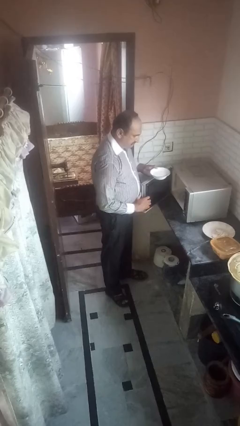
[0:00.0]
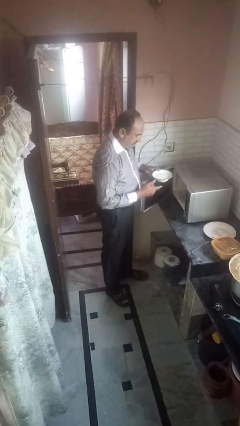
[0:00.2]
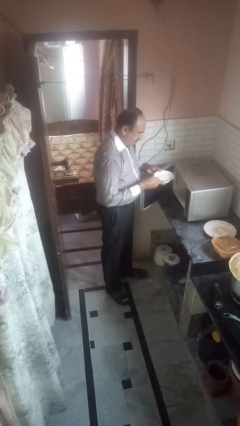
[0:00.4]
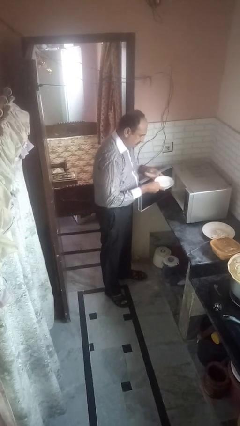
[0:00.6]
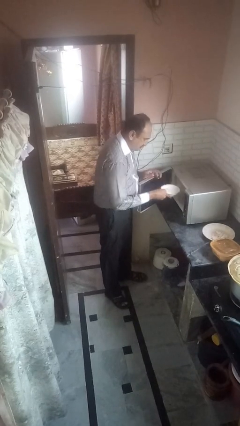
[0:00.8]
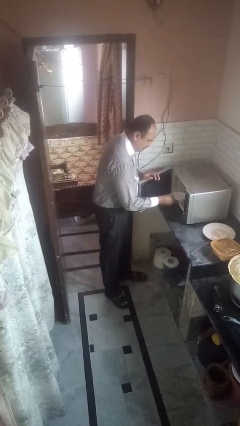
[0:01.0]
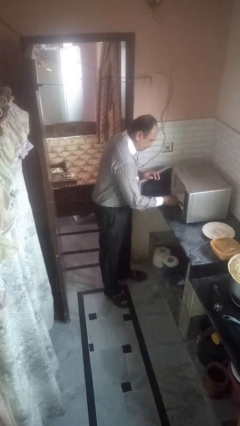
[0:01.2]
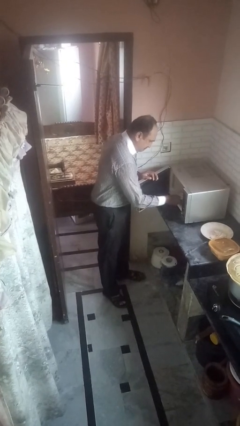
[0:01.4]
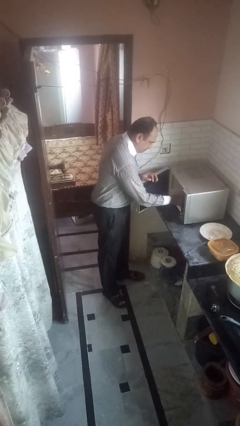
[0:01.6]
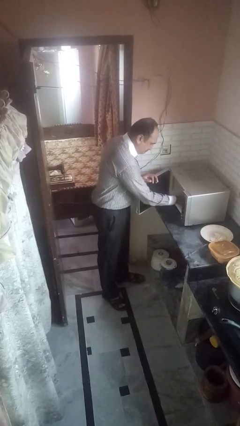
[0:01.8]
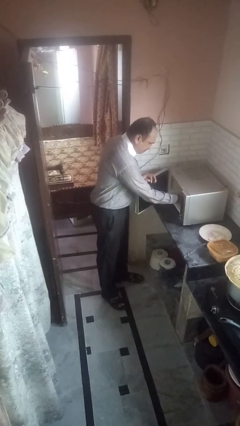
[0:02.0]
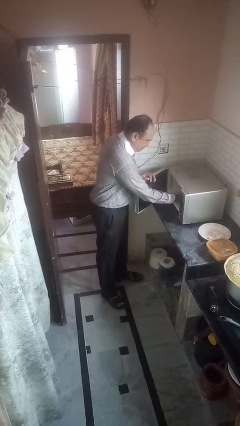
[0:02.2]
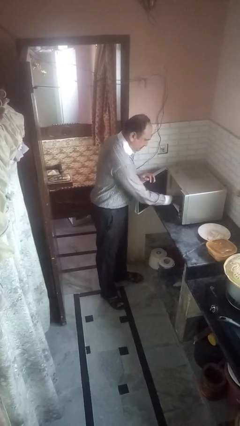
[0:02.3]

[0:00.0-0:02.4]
person puts object into microwave

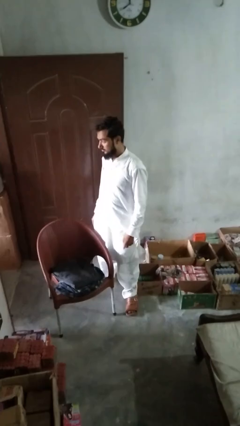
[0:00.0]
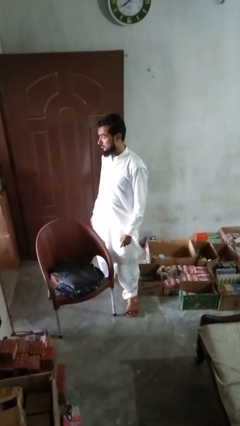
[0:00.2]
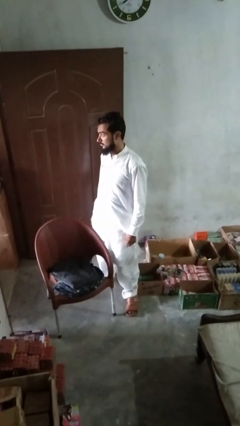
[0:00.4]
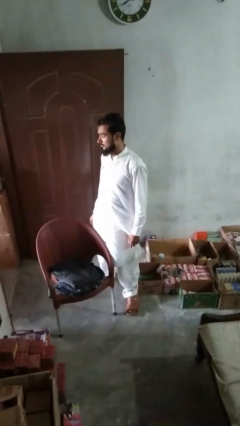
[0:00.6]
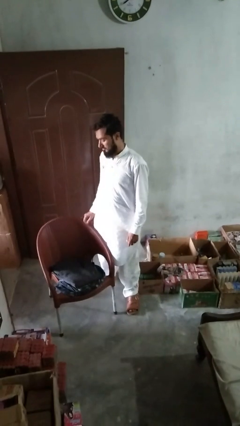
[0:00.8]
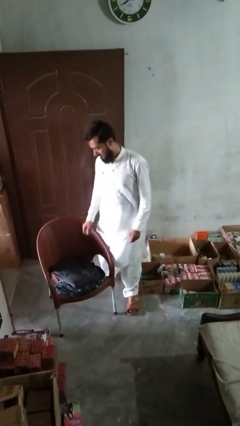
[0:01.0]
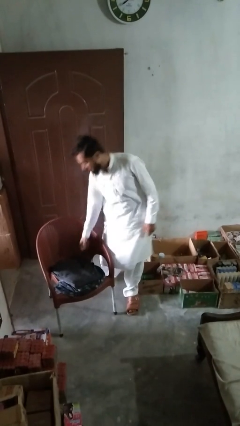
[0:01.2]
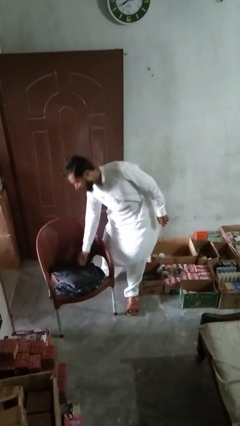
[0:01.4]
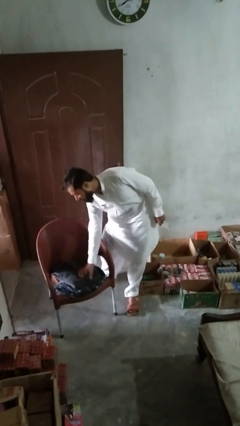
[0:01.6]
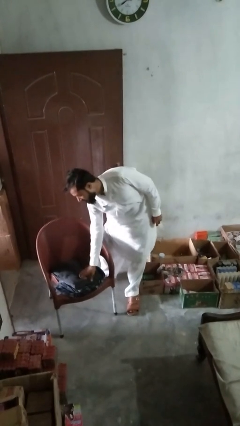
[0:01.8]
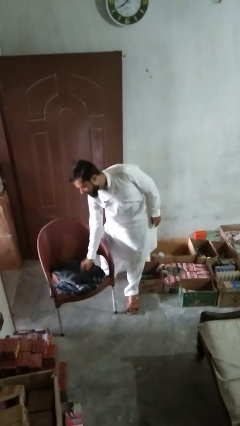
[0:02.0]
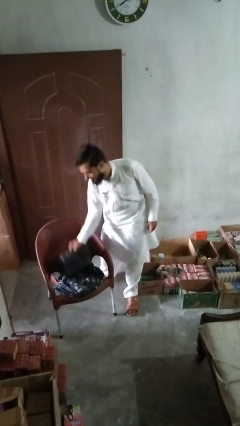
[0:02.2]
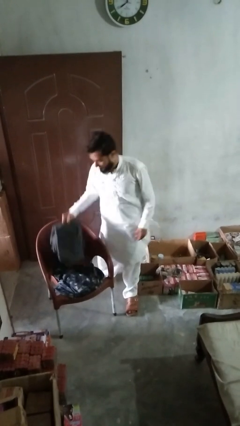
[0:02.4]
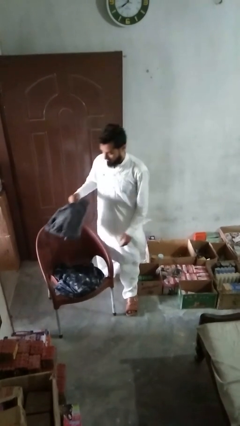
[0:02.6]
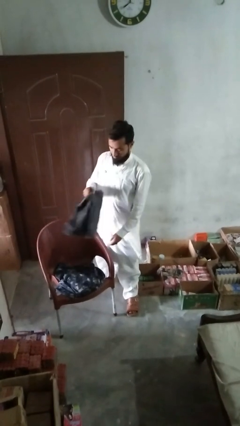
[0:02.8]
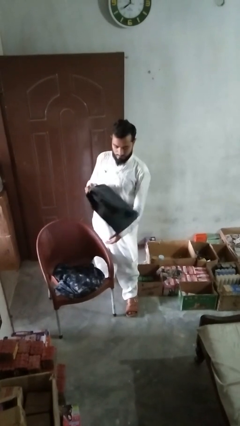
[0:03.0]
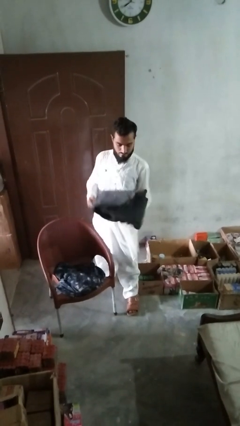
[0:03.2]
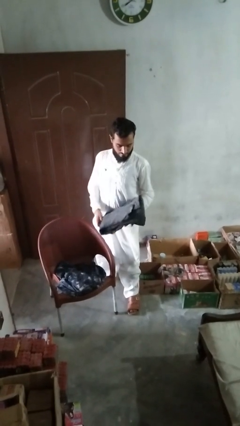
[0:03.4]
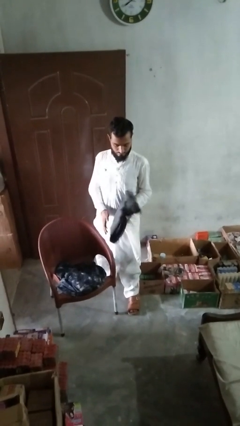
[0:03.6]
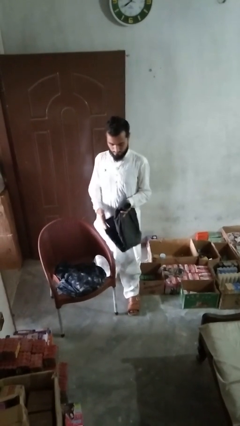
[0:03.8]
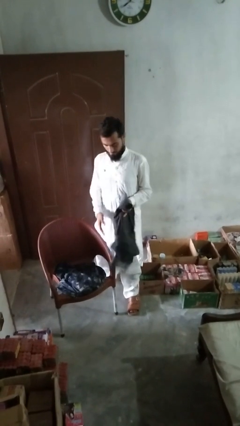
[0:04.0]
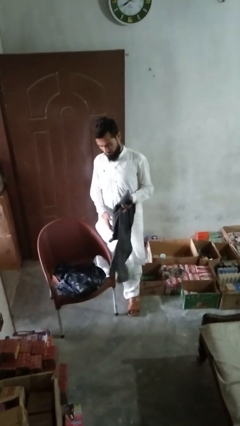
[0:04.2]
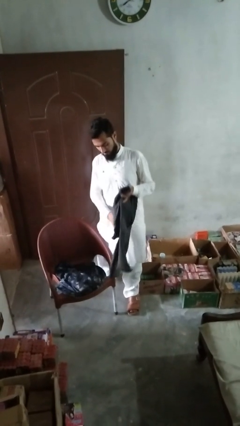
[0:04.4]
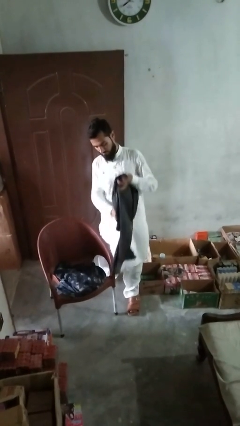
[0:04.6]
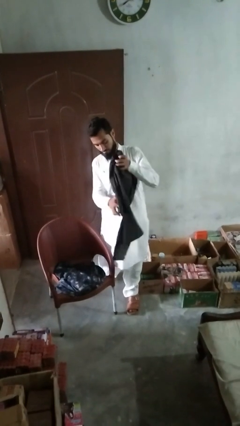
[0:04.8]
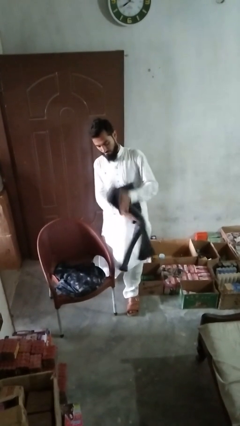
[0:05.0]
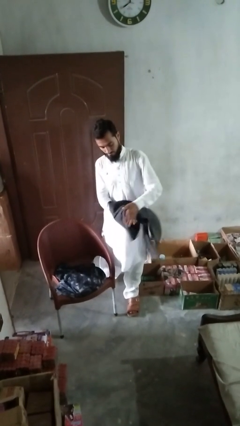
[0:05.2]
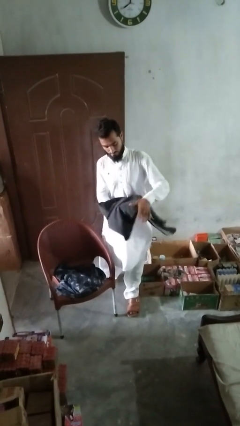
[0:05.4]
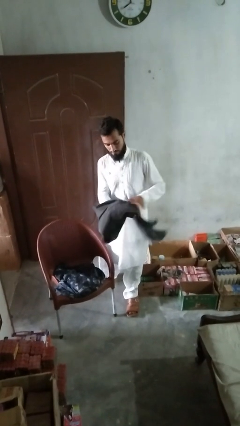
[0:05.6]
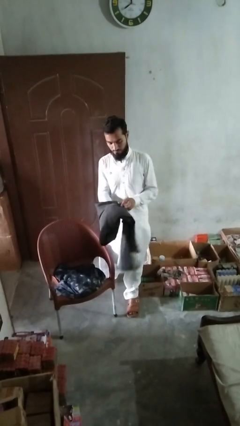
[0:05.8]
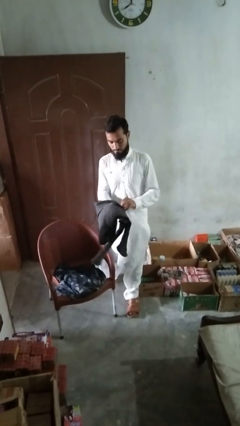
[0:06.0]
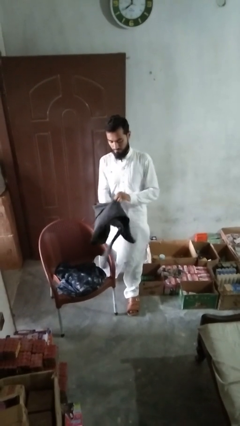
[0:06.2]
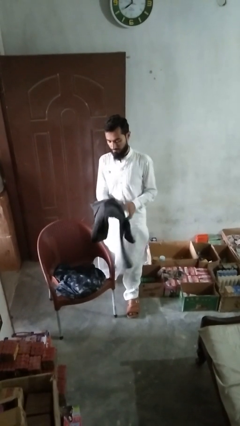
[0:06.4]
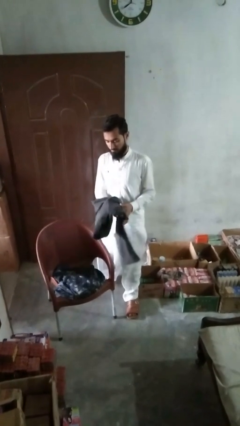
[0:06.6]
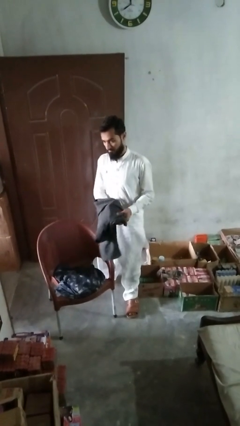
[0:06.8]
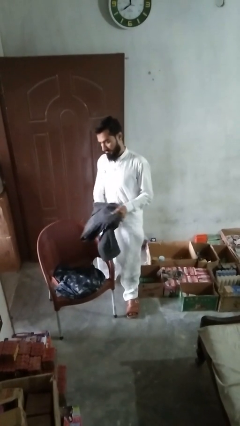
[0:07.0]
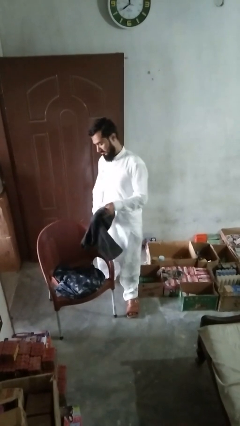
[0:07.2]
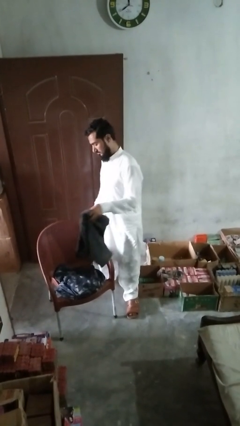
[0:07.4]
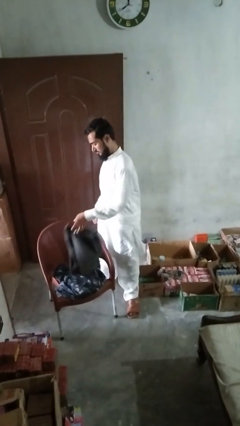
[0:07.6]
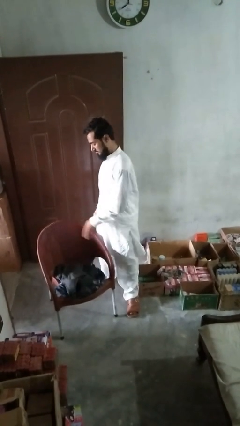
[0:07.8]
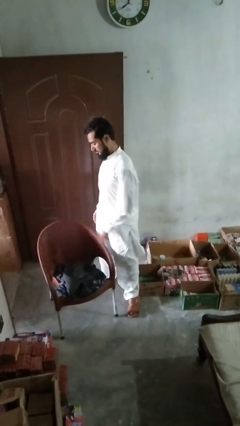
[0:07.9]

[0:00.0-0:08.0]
person folds pants

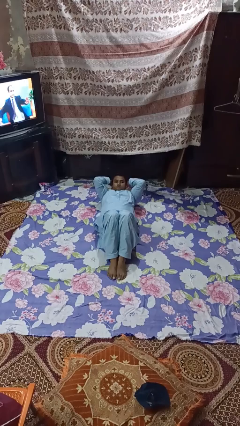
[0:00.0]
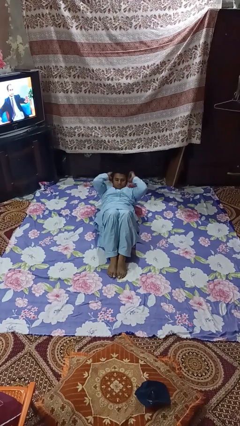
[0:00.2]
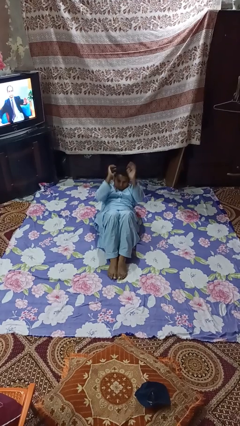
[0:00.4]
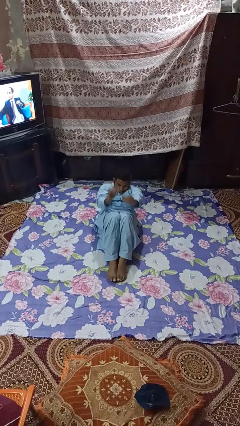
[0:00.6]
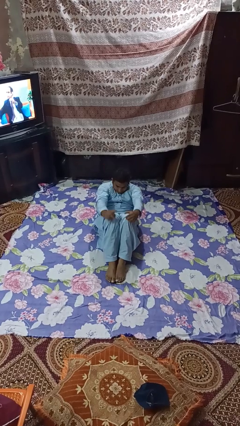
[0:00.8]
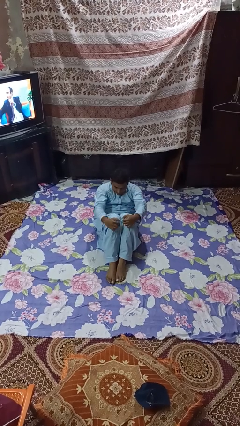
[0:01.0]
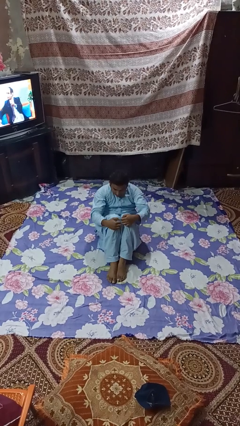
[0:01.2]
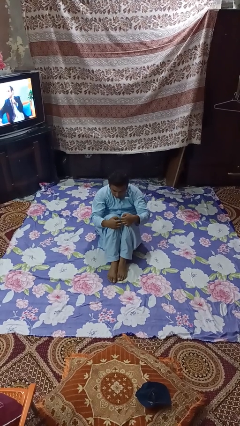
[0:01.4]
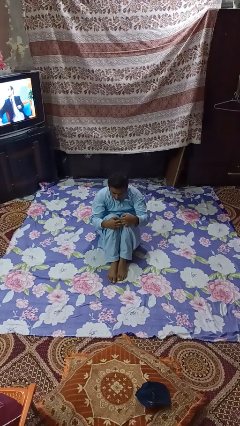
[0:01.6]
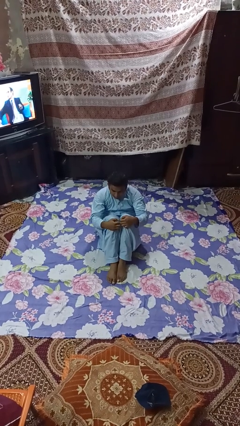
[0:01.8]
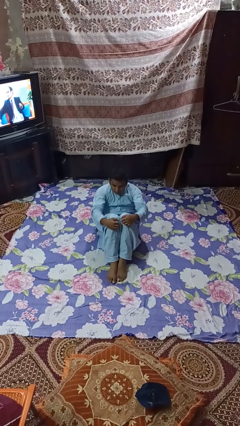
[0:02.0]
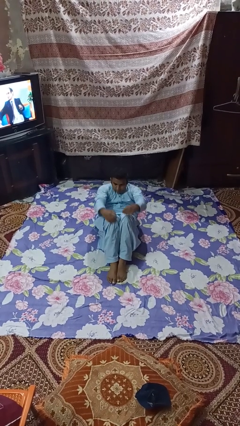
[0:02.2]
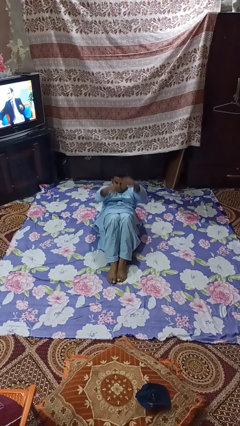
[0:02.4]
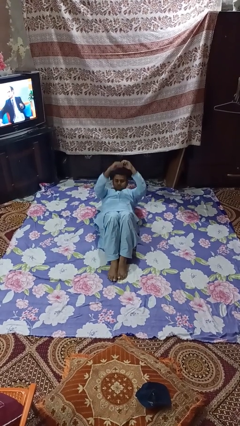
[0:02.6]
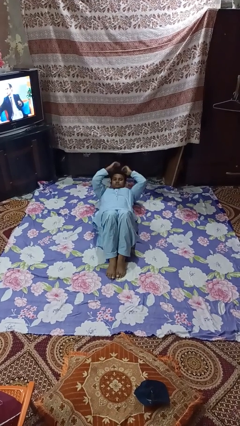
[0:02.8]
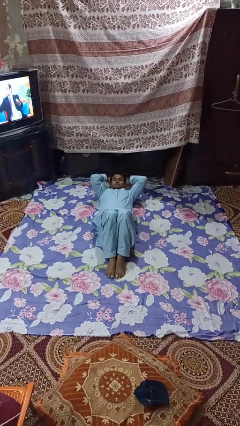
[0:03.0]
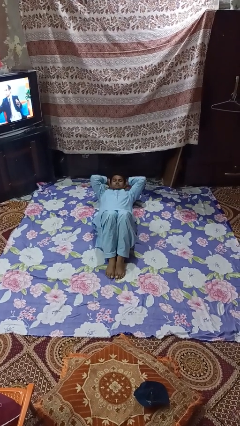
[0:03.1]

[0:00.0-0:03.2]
person exercises with situp

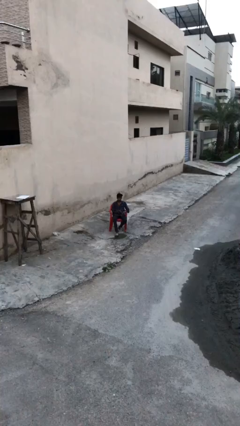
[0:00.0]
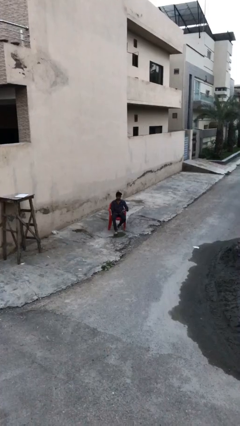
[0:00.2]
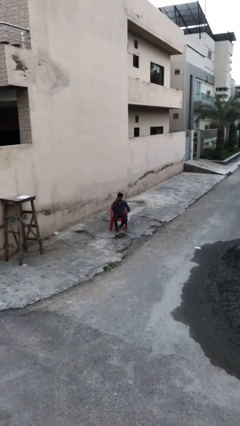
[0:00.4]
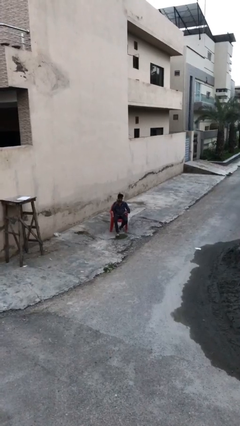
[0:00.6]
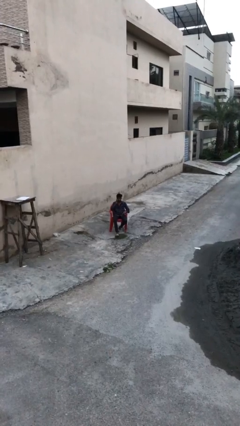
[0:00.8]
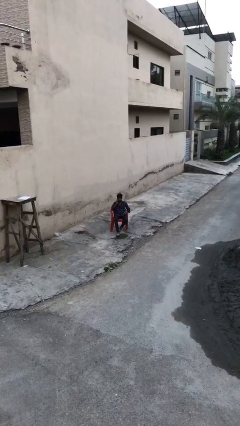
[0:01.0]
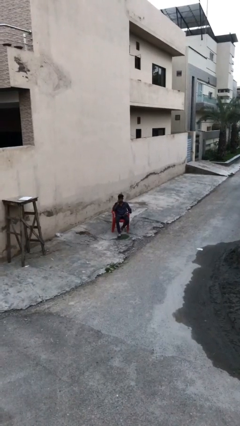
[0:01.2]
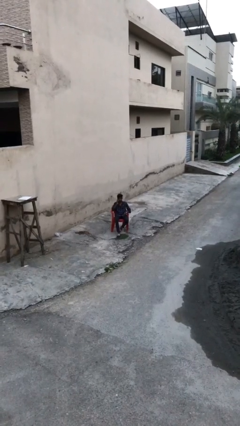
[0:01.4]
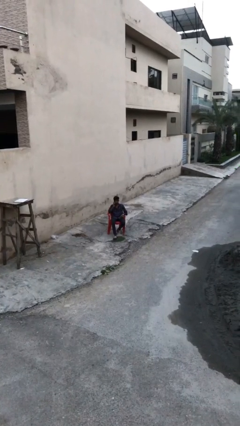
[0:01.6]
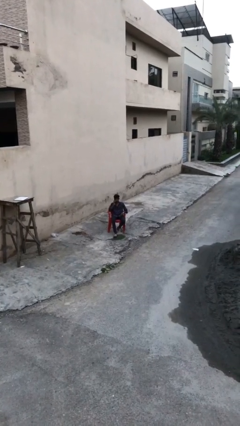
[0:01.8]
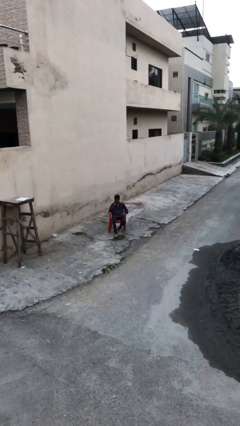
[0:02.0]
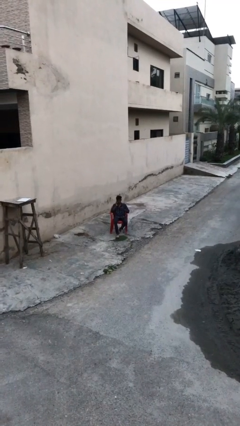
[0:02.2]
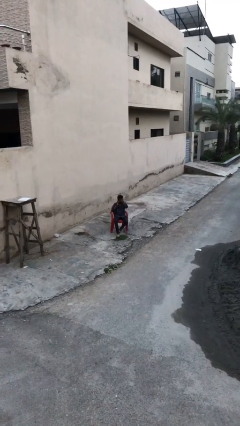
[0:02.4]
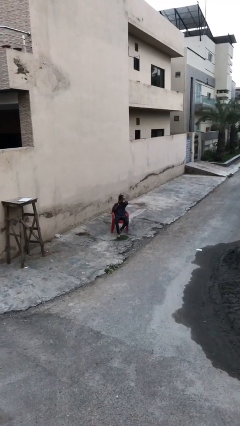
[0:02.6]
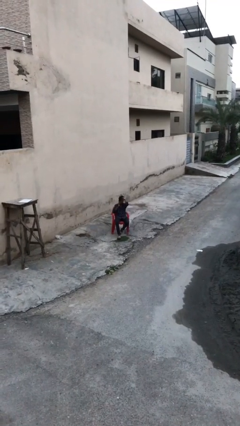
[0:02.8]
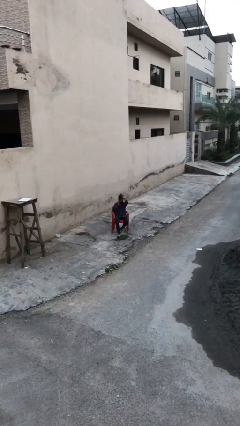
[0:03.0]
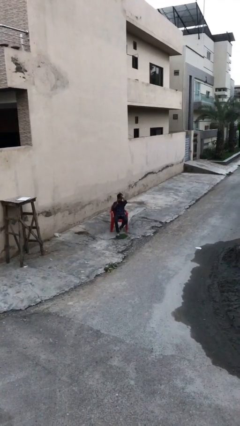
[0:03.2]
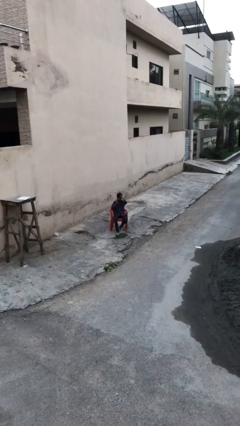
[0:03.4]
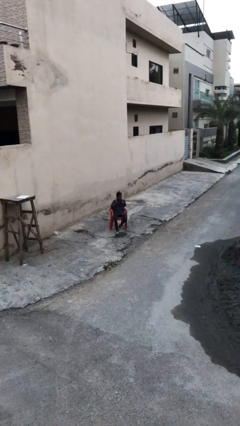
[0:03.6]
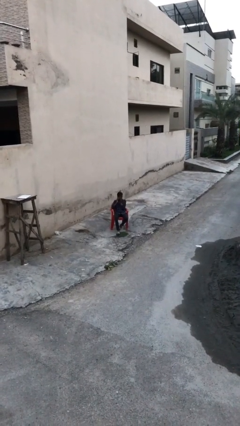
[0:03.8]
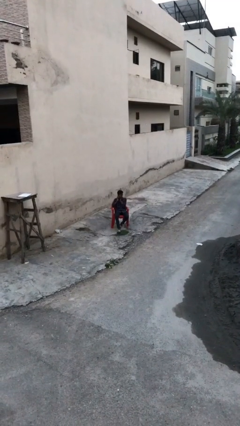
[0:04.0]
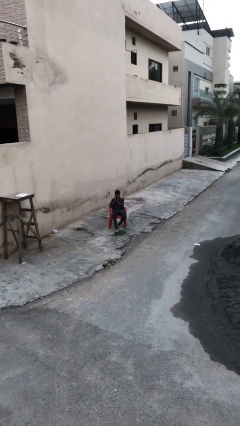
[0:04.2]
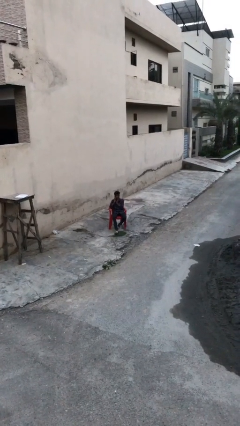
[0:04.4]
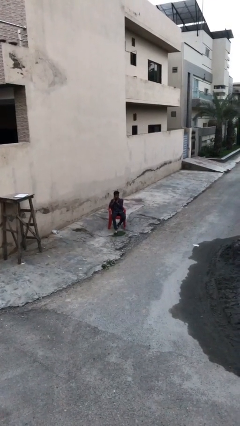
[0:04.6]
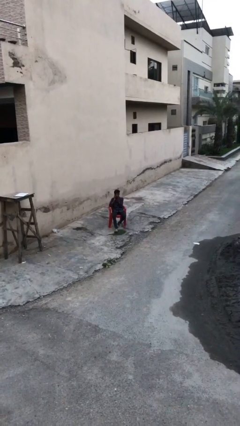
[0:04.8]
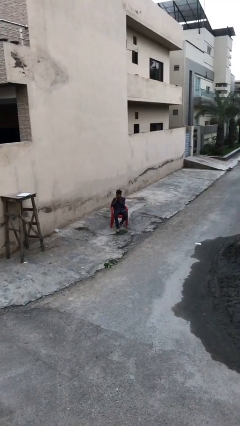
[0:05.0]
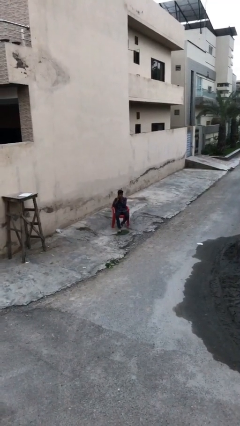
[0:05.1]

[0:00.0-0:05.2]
person talks on phone
